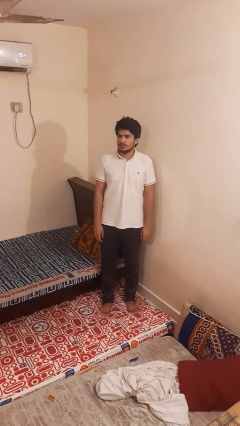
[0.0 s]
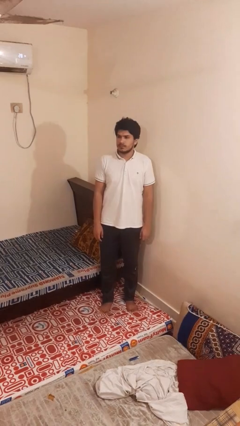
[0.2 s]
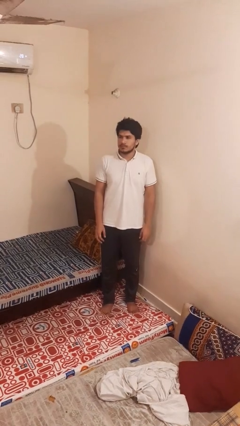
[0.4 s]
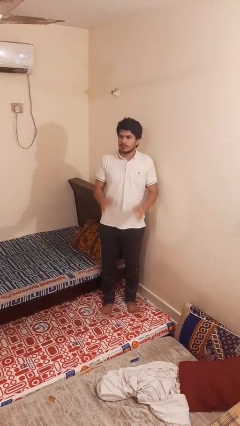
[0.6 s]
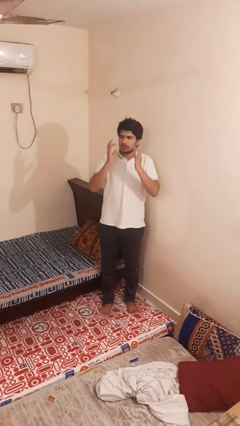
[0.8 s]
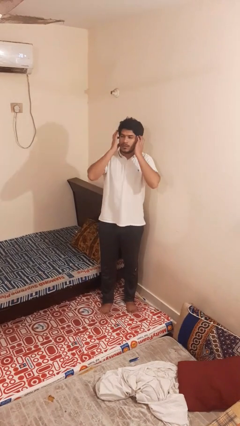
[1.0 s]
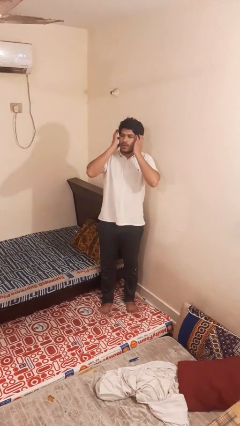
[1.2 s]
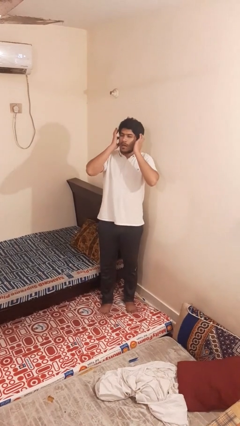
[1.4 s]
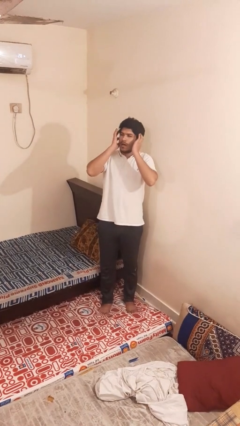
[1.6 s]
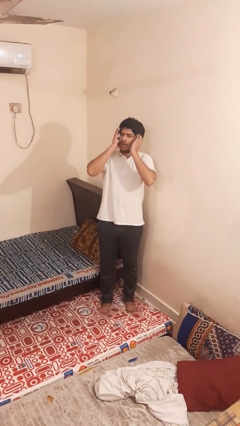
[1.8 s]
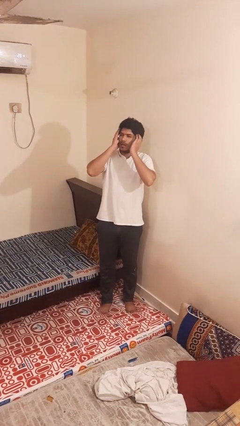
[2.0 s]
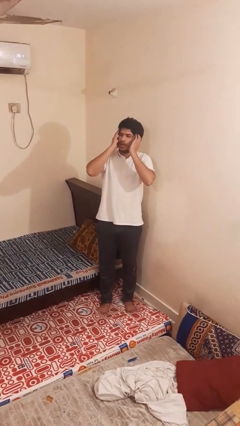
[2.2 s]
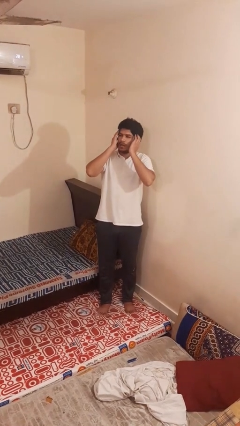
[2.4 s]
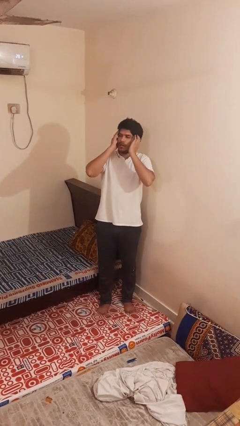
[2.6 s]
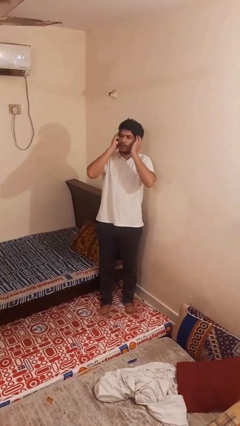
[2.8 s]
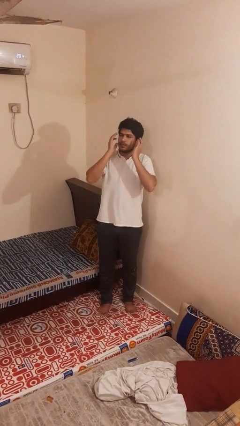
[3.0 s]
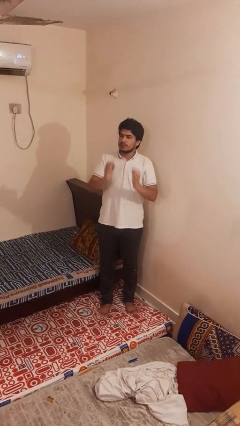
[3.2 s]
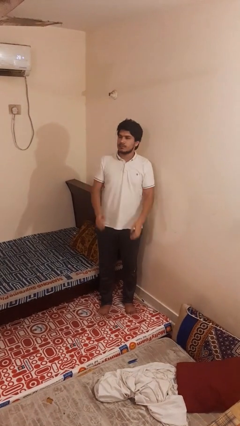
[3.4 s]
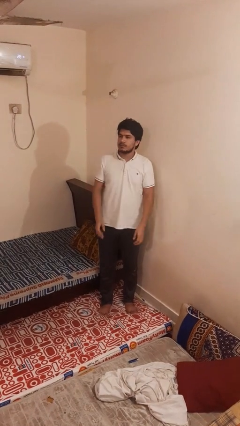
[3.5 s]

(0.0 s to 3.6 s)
person puts fingers in ear

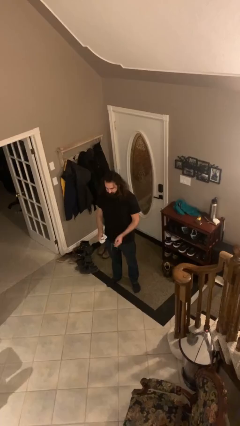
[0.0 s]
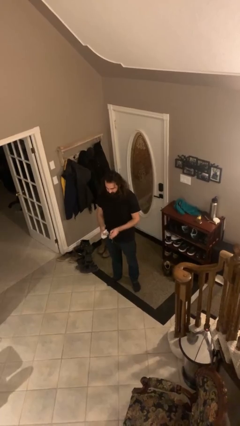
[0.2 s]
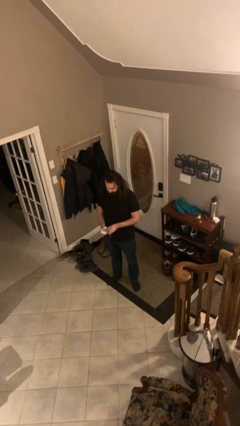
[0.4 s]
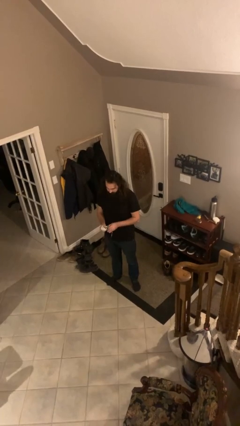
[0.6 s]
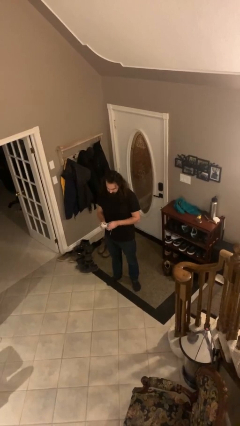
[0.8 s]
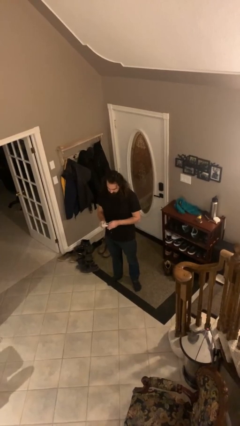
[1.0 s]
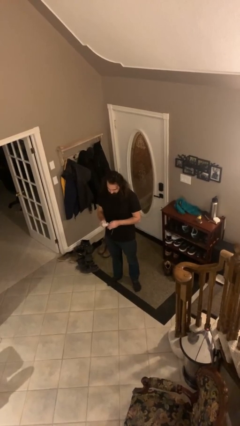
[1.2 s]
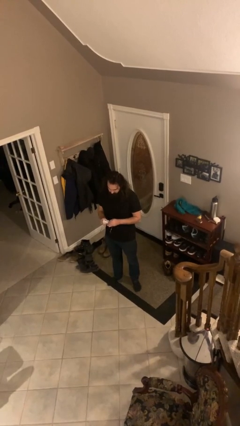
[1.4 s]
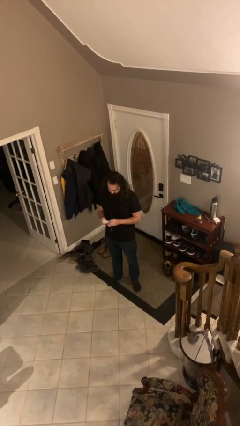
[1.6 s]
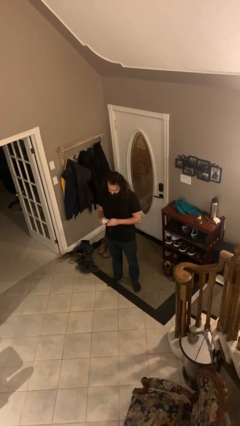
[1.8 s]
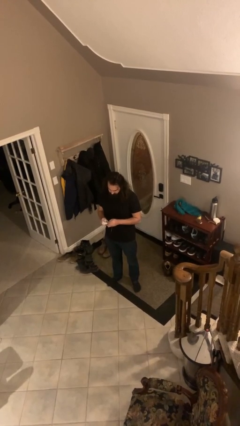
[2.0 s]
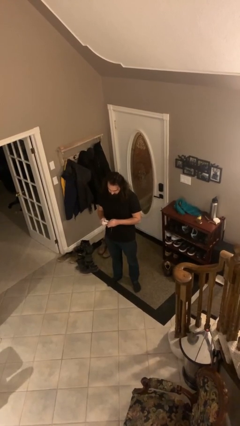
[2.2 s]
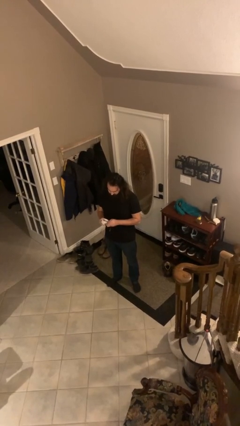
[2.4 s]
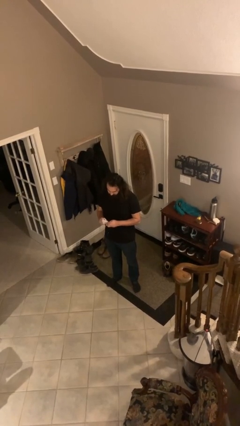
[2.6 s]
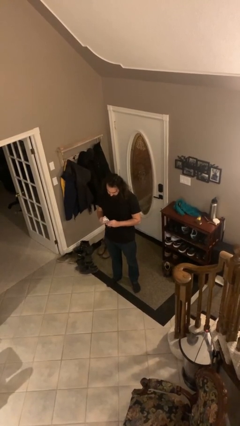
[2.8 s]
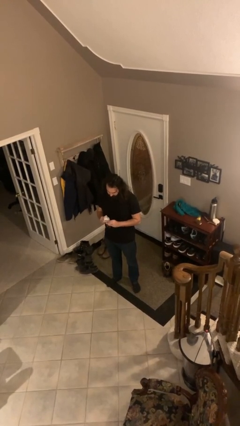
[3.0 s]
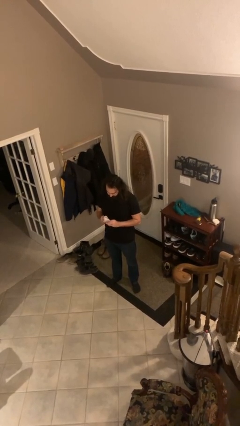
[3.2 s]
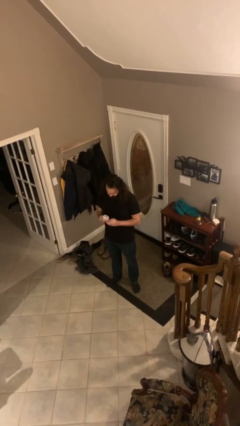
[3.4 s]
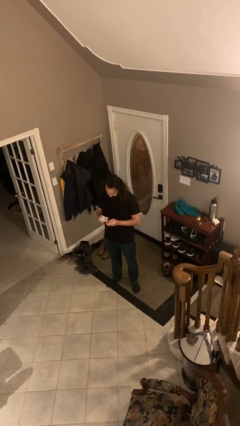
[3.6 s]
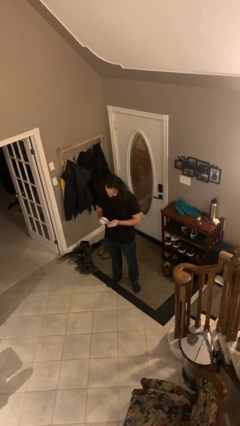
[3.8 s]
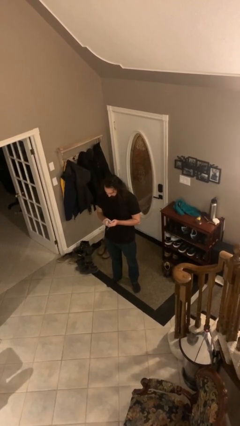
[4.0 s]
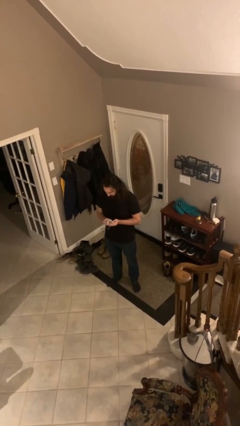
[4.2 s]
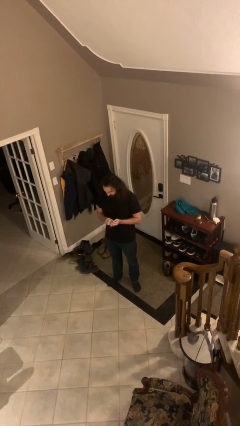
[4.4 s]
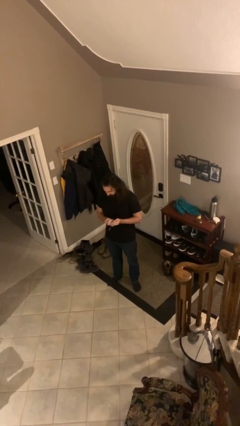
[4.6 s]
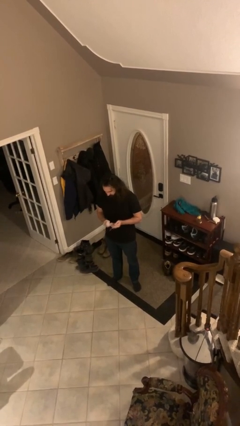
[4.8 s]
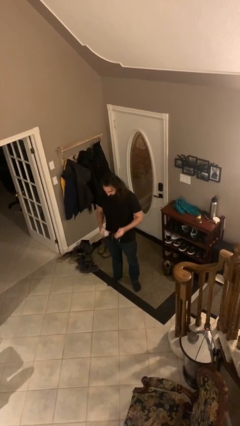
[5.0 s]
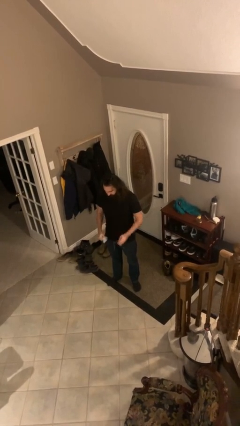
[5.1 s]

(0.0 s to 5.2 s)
person cleans eyeglasses

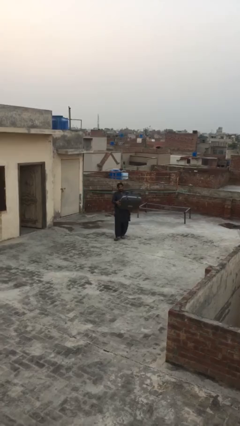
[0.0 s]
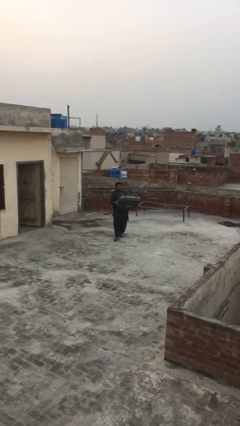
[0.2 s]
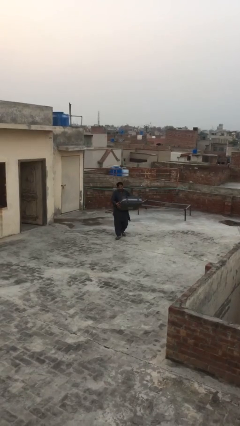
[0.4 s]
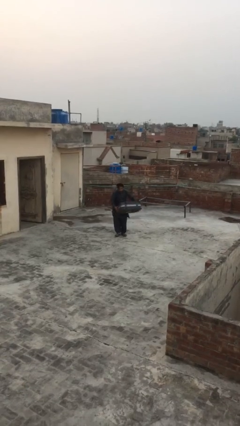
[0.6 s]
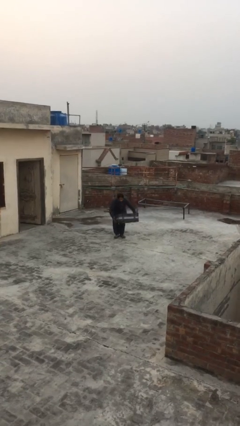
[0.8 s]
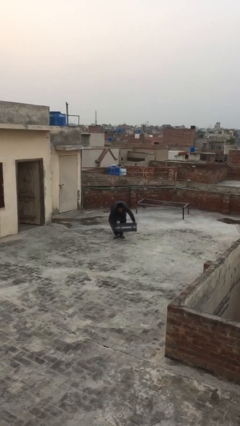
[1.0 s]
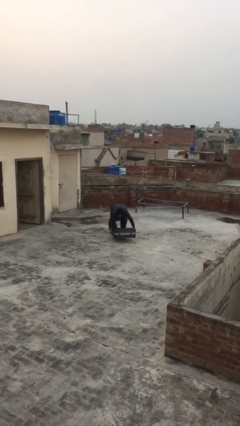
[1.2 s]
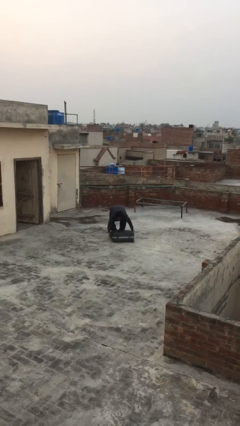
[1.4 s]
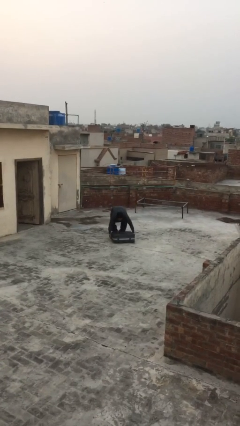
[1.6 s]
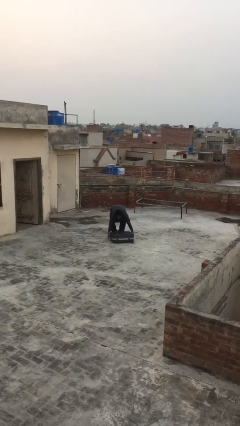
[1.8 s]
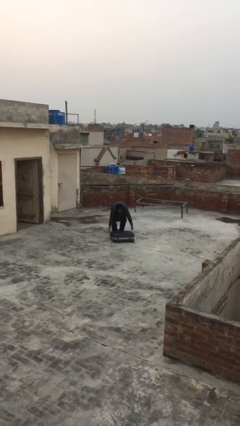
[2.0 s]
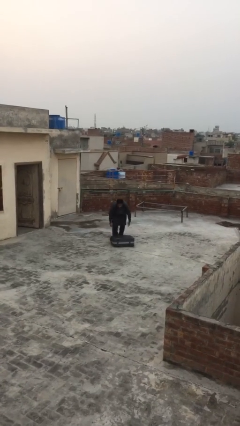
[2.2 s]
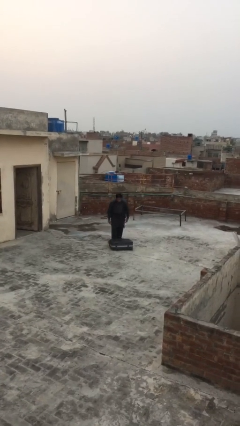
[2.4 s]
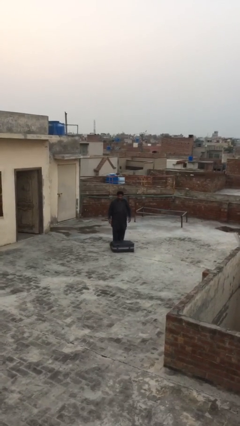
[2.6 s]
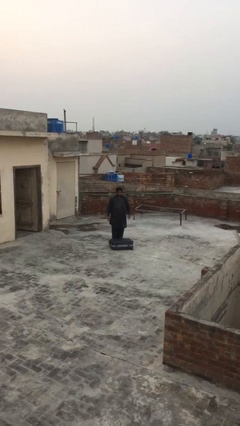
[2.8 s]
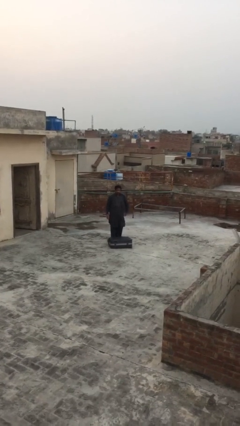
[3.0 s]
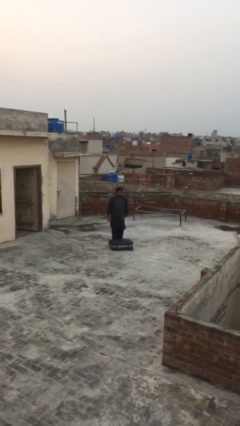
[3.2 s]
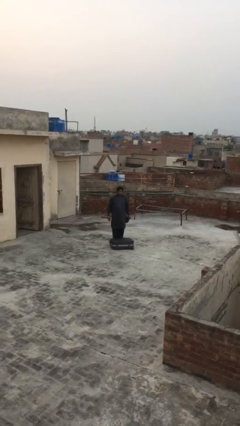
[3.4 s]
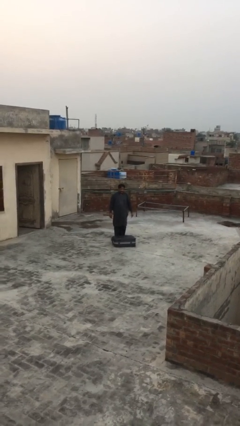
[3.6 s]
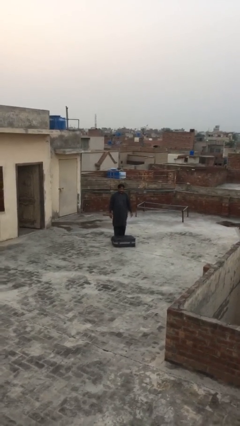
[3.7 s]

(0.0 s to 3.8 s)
person puts down object on floor

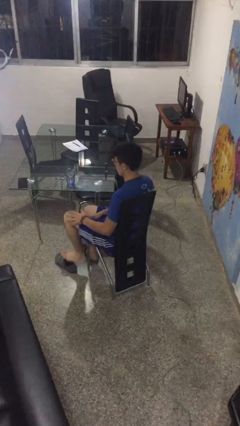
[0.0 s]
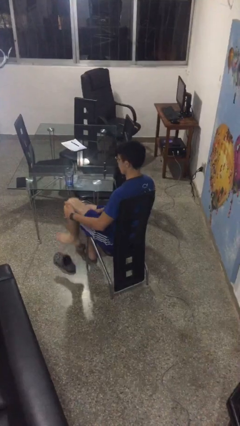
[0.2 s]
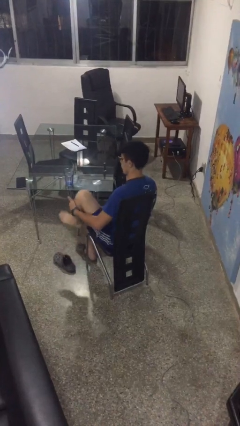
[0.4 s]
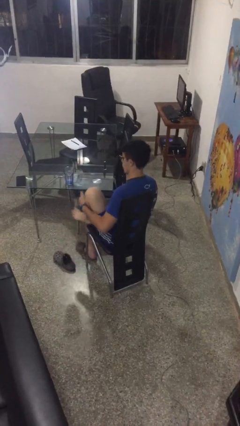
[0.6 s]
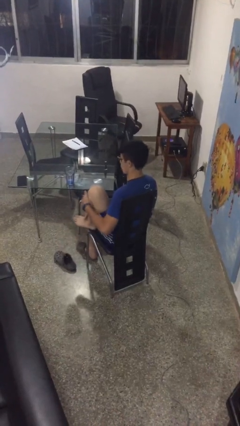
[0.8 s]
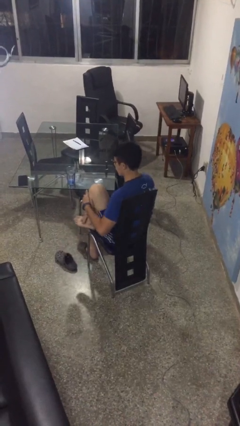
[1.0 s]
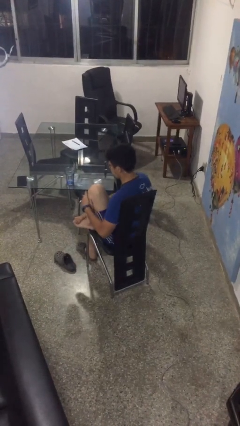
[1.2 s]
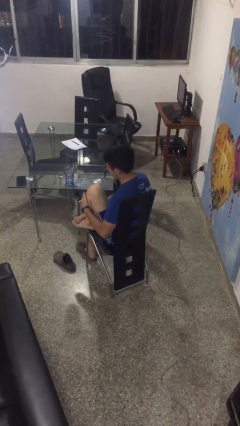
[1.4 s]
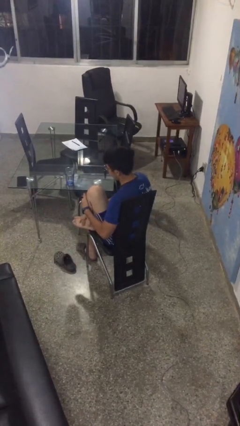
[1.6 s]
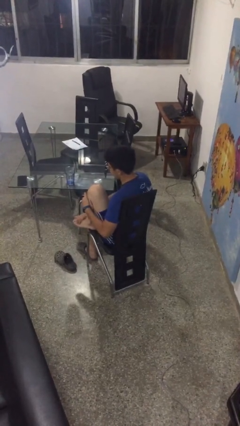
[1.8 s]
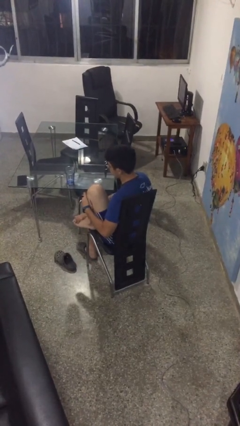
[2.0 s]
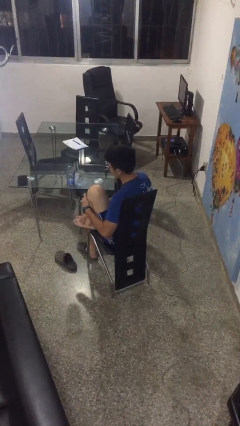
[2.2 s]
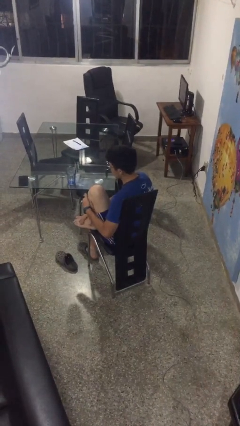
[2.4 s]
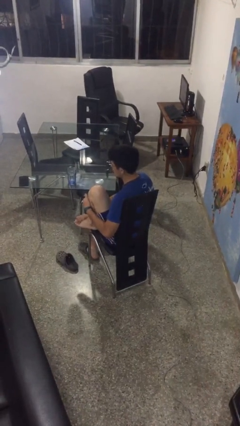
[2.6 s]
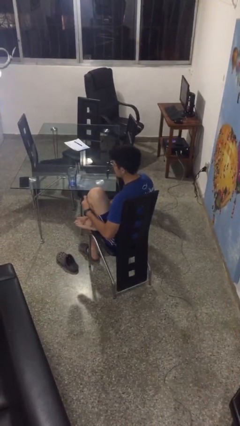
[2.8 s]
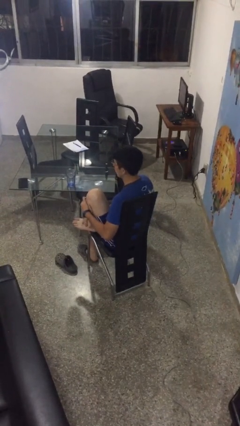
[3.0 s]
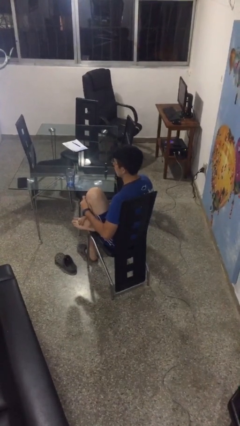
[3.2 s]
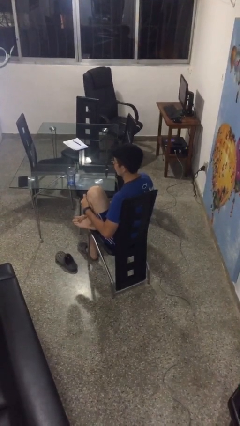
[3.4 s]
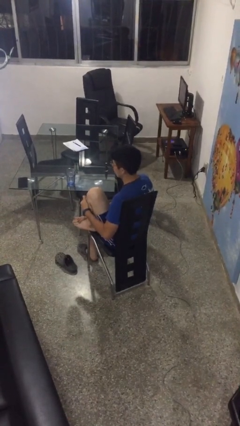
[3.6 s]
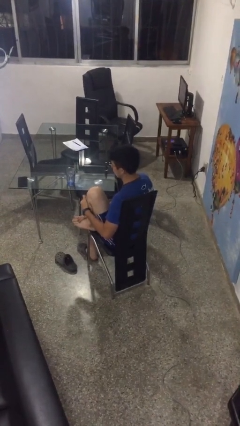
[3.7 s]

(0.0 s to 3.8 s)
person rubs foot

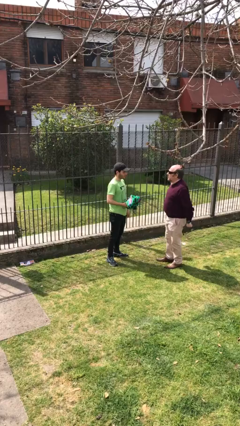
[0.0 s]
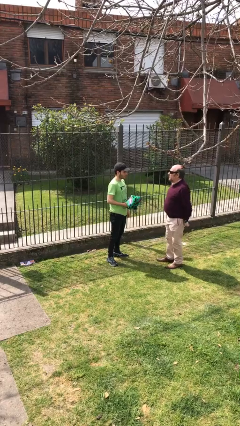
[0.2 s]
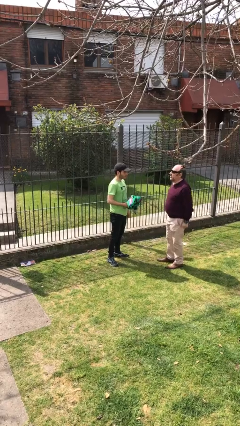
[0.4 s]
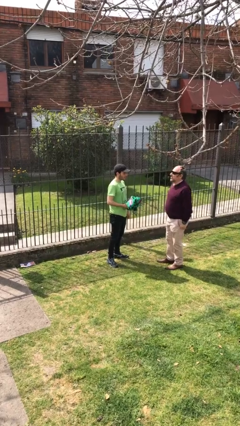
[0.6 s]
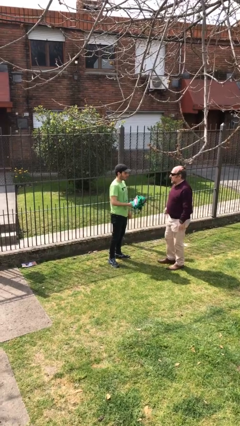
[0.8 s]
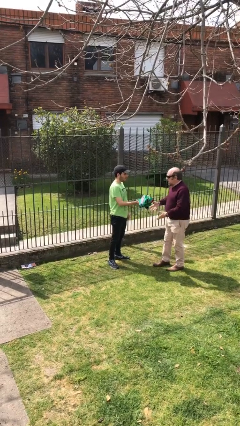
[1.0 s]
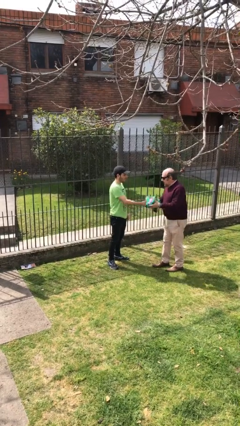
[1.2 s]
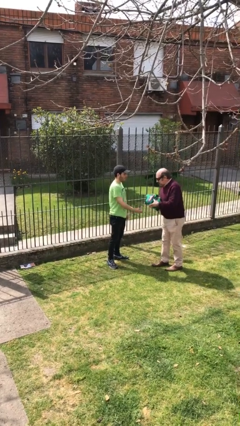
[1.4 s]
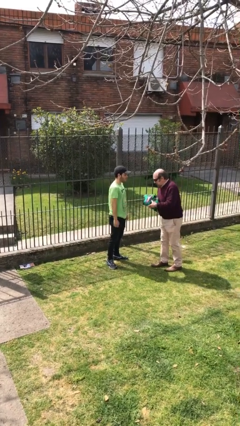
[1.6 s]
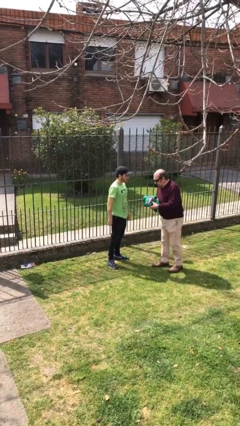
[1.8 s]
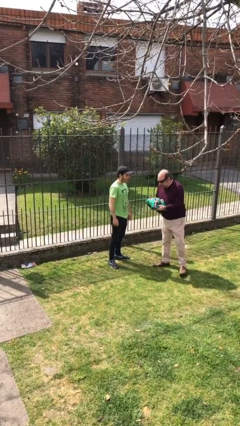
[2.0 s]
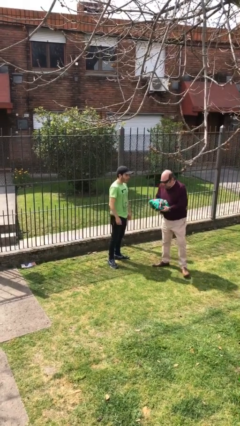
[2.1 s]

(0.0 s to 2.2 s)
person transfers object to person
